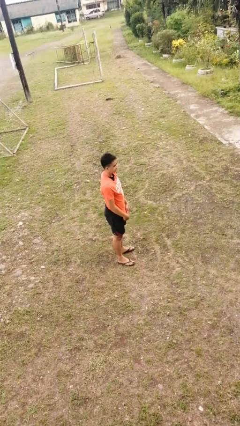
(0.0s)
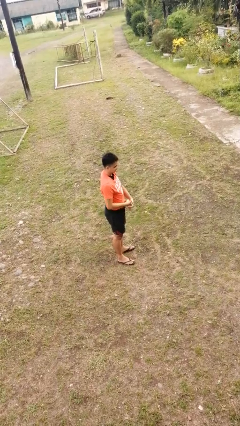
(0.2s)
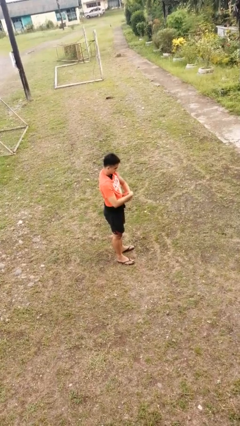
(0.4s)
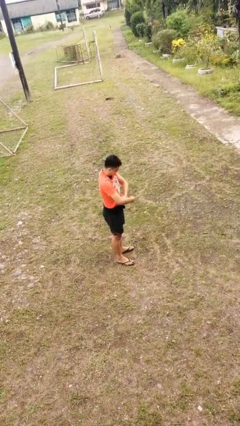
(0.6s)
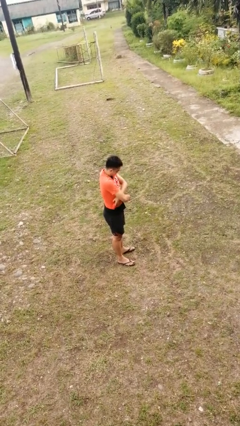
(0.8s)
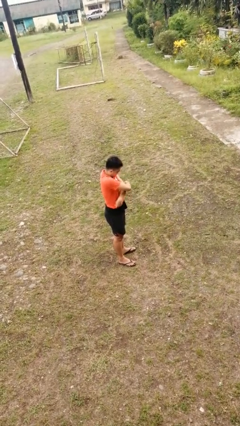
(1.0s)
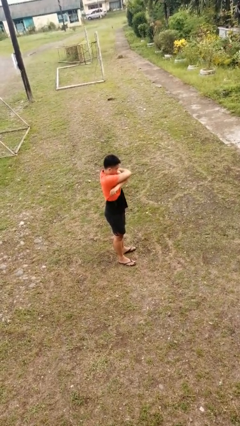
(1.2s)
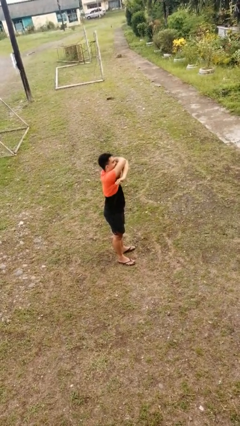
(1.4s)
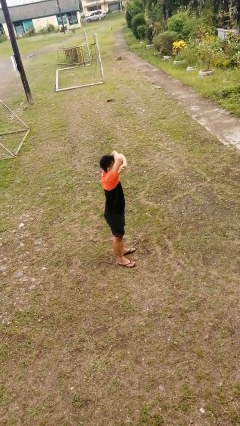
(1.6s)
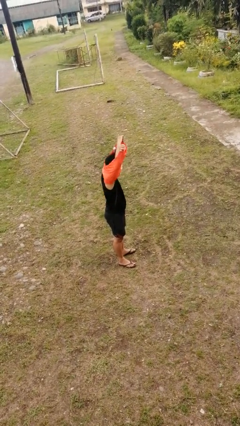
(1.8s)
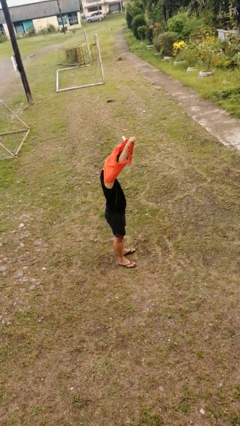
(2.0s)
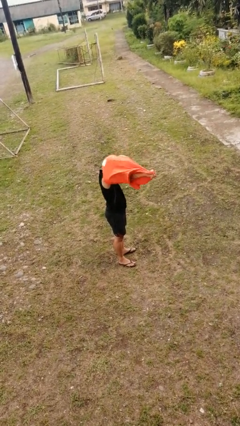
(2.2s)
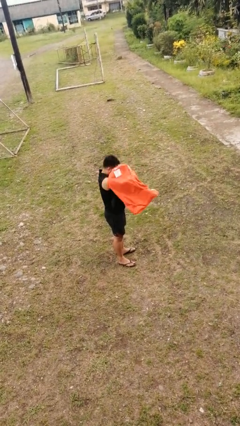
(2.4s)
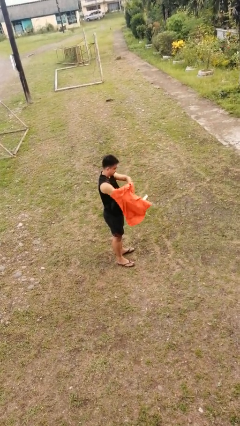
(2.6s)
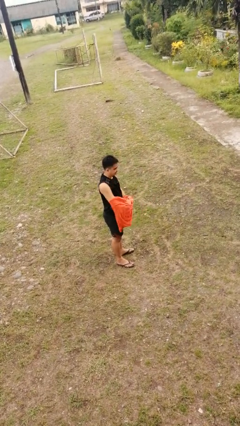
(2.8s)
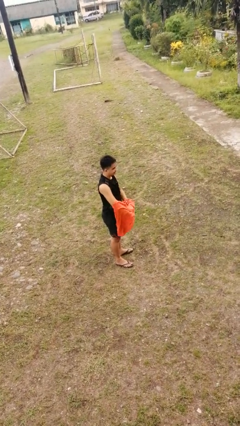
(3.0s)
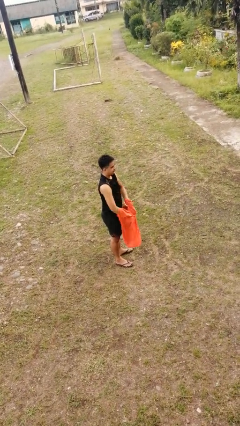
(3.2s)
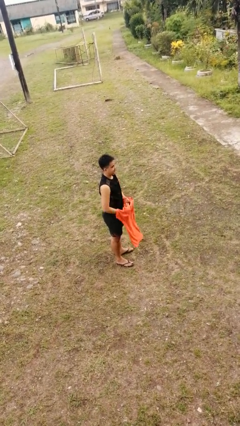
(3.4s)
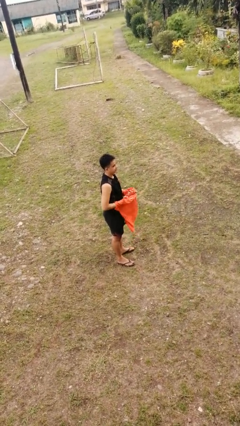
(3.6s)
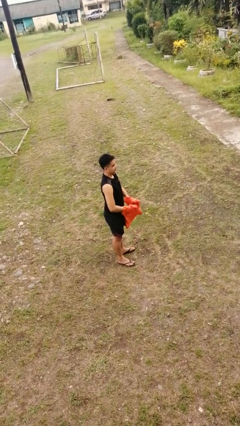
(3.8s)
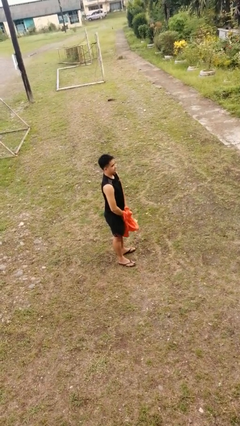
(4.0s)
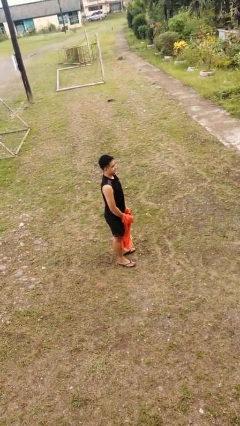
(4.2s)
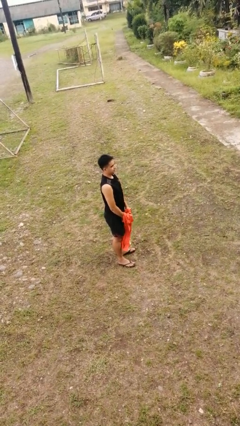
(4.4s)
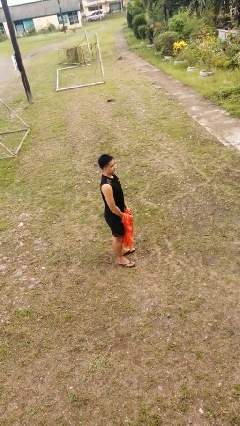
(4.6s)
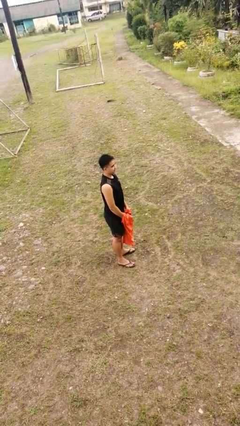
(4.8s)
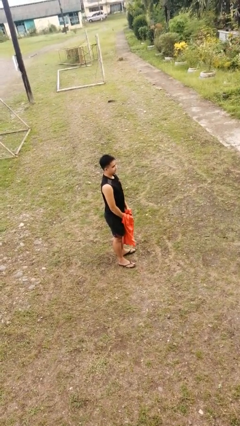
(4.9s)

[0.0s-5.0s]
person takes off shirt

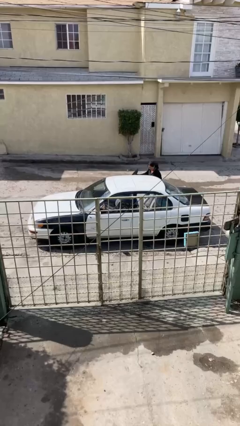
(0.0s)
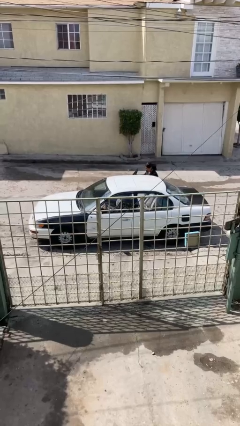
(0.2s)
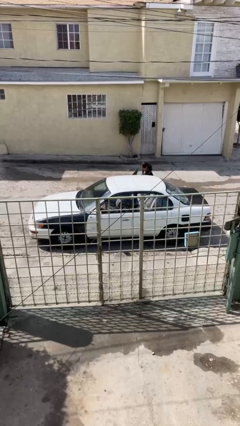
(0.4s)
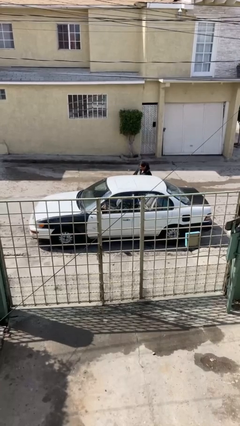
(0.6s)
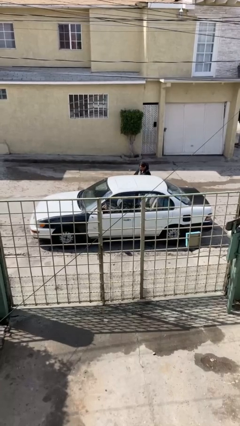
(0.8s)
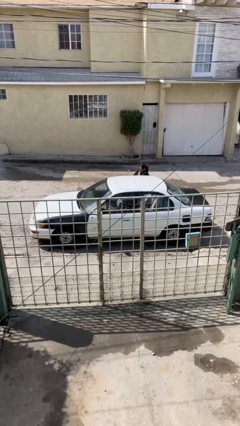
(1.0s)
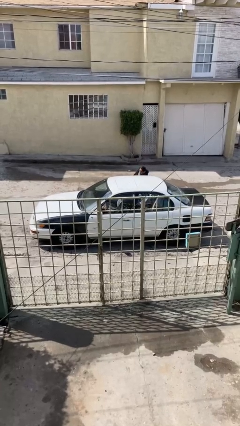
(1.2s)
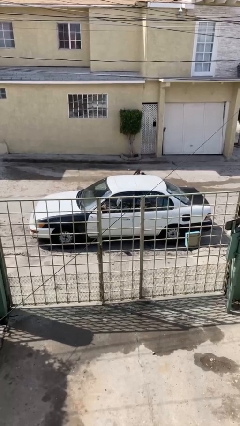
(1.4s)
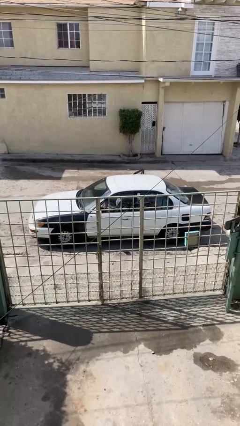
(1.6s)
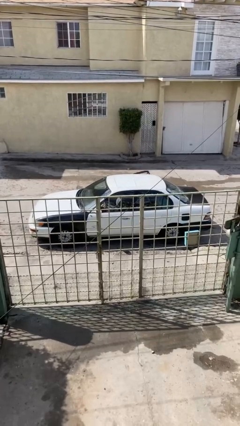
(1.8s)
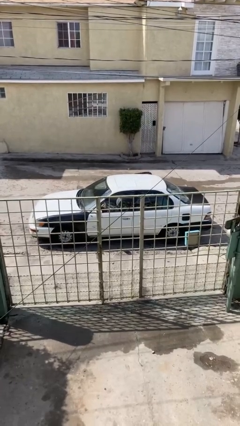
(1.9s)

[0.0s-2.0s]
car picks up person

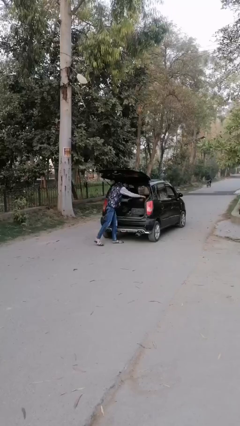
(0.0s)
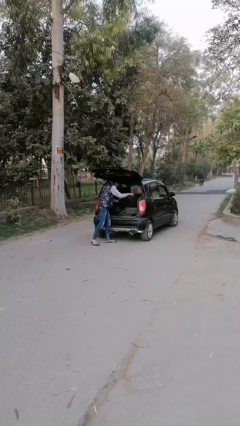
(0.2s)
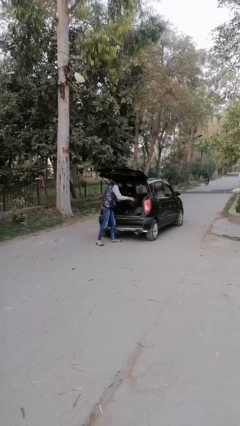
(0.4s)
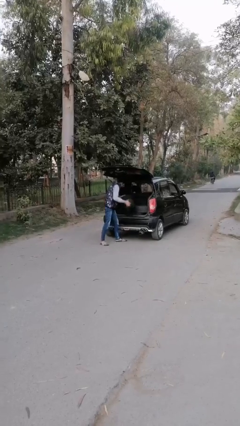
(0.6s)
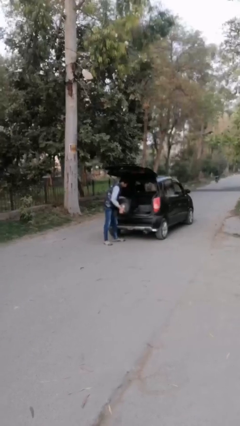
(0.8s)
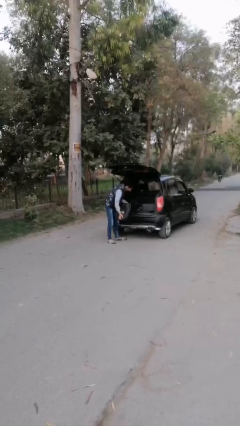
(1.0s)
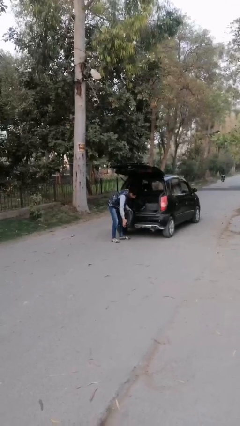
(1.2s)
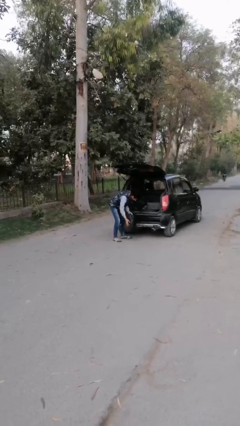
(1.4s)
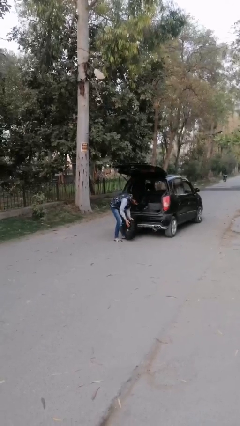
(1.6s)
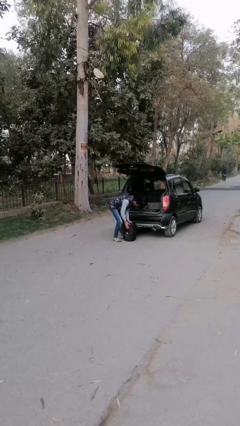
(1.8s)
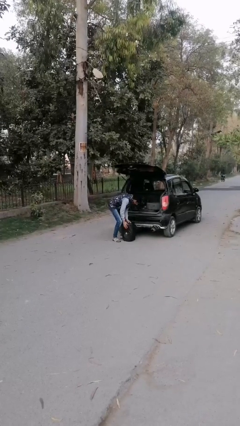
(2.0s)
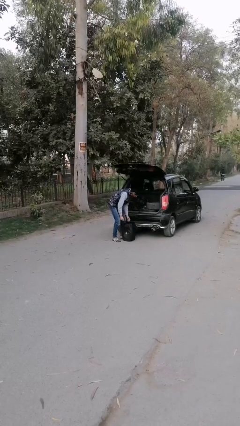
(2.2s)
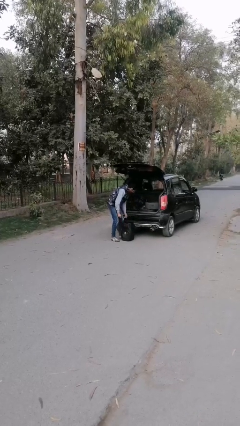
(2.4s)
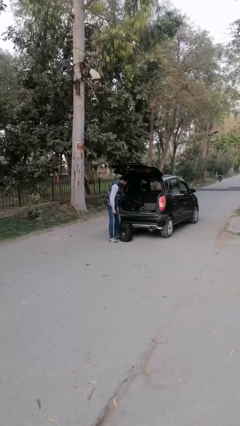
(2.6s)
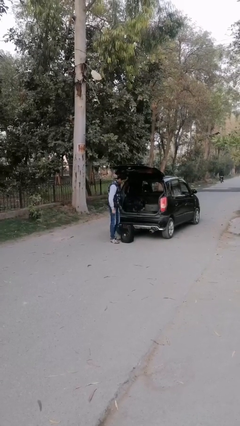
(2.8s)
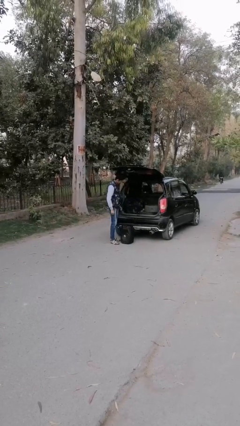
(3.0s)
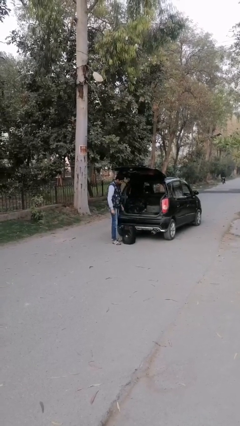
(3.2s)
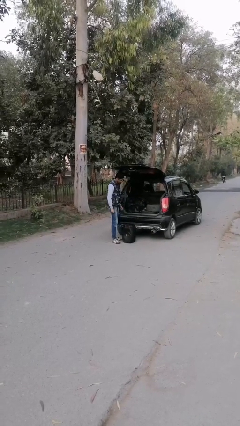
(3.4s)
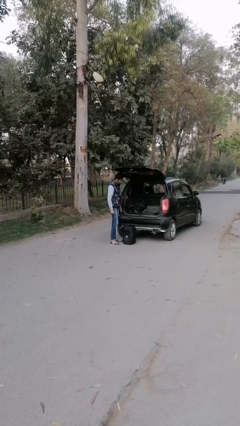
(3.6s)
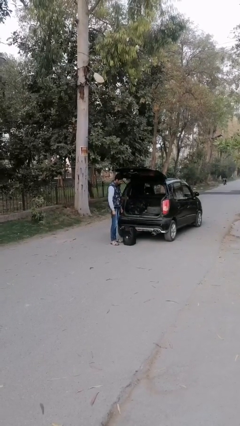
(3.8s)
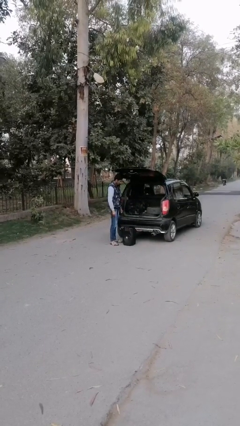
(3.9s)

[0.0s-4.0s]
person unloads car

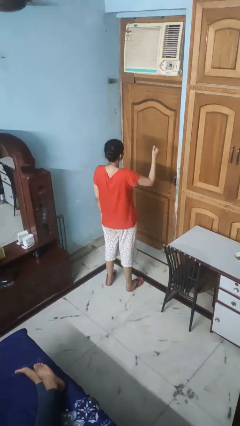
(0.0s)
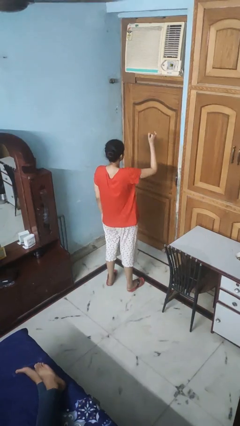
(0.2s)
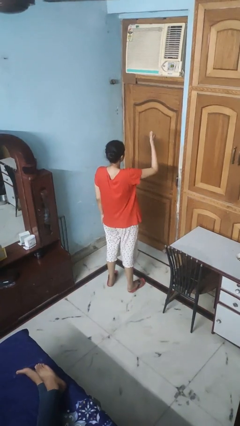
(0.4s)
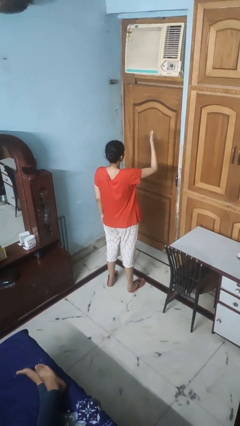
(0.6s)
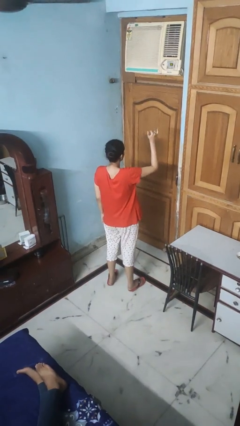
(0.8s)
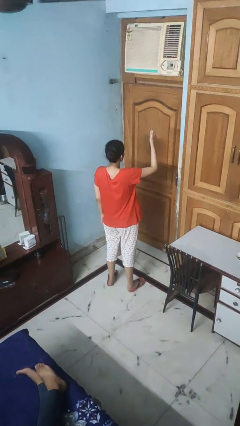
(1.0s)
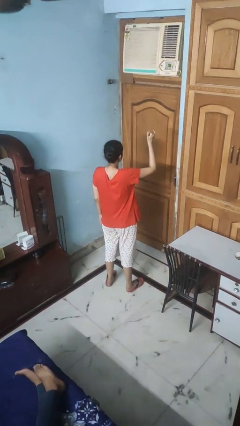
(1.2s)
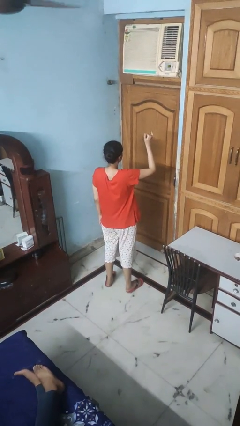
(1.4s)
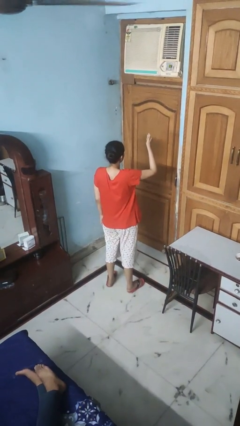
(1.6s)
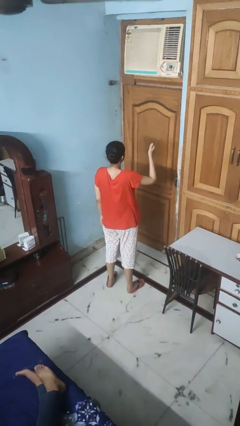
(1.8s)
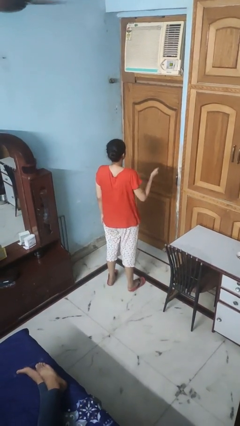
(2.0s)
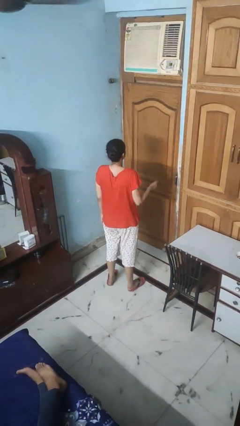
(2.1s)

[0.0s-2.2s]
person gestures hang loose

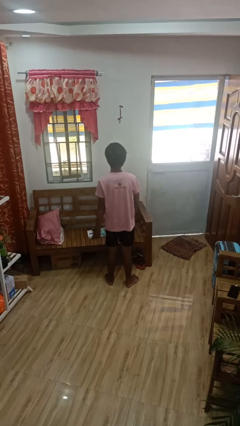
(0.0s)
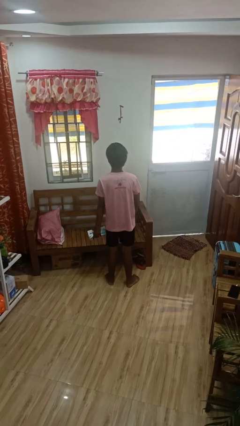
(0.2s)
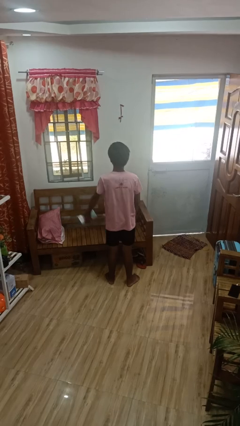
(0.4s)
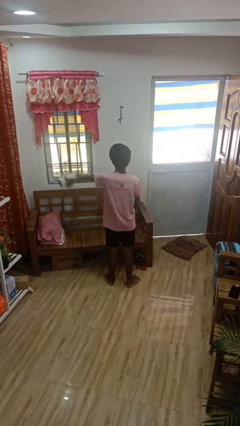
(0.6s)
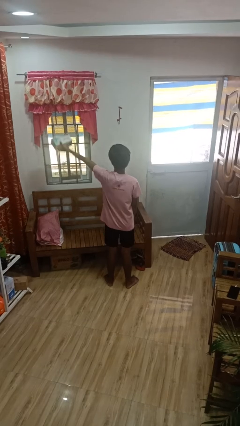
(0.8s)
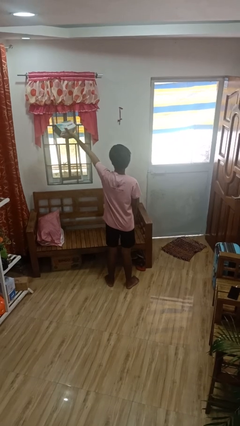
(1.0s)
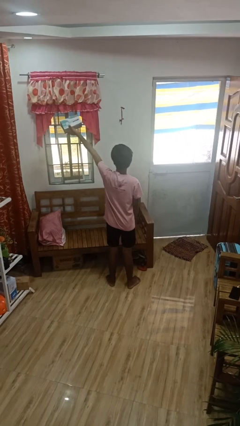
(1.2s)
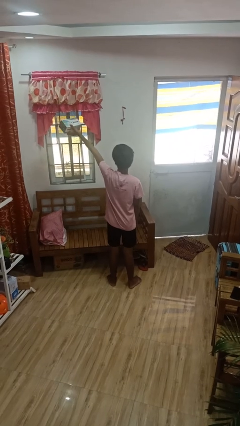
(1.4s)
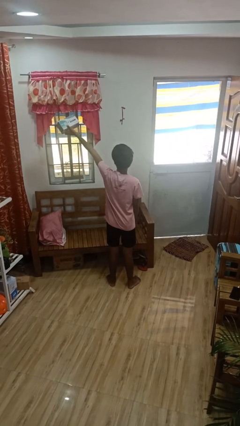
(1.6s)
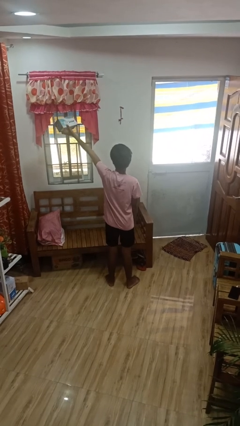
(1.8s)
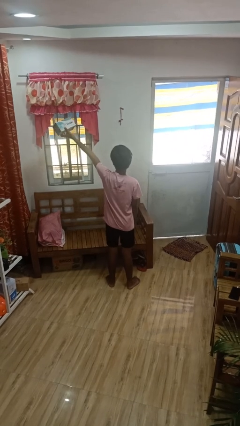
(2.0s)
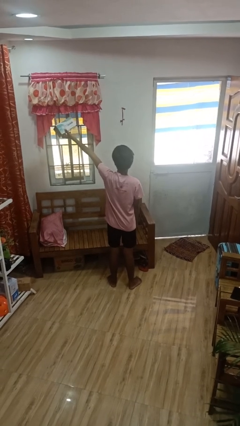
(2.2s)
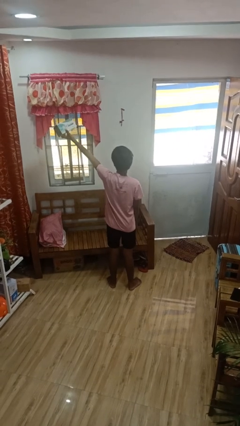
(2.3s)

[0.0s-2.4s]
person holds object above head

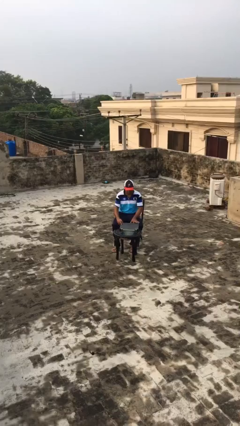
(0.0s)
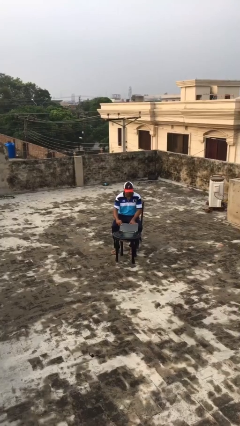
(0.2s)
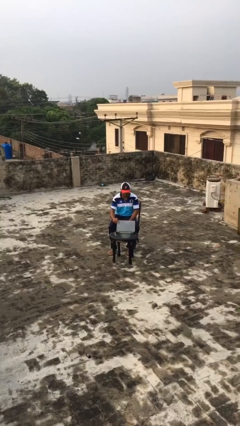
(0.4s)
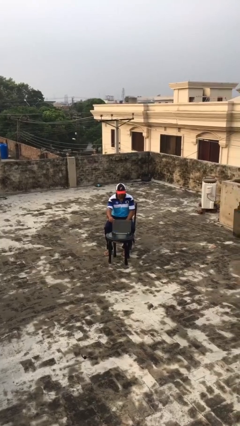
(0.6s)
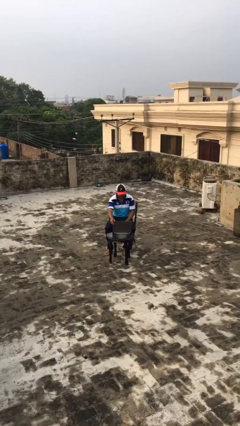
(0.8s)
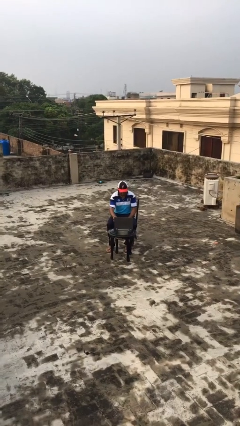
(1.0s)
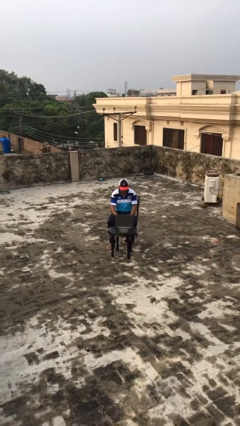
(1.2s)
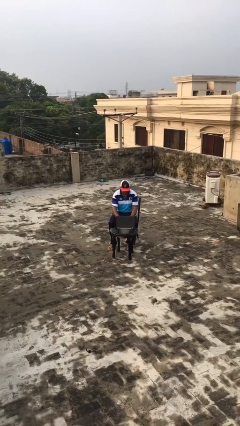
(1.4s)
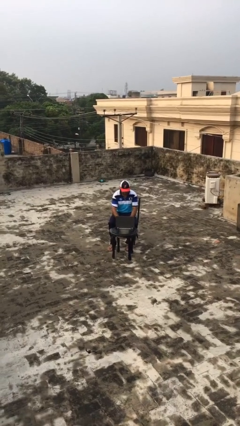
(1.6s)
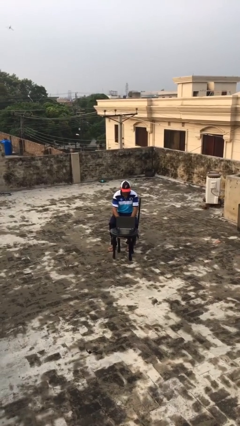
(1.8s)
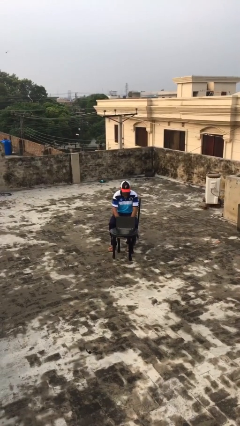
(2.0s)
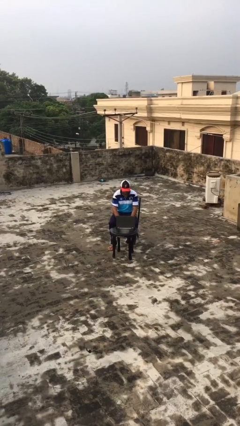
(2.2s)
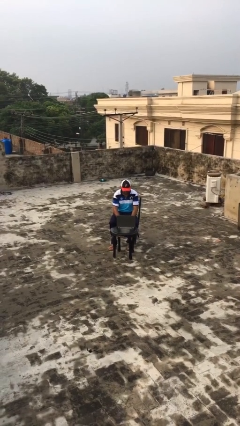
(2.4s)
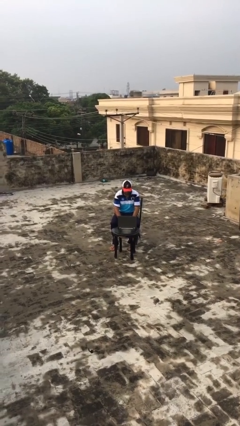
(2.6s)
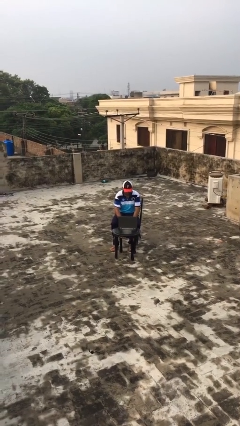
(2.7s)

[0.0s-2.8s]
person interacts with laptop
